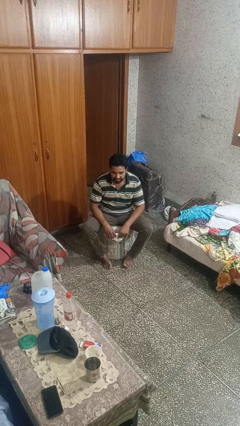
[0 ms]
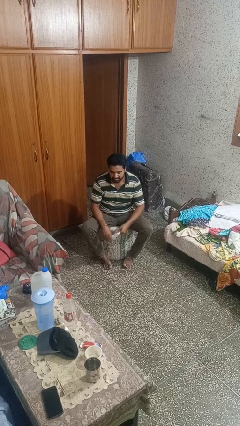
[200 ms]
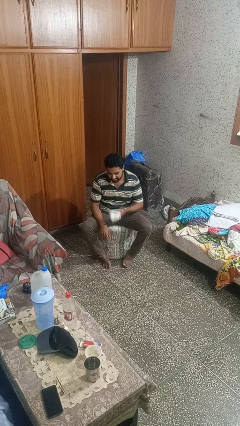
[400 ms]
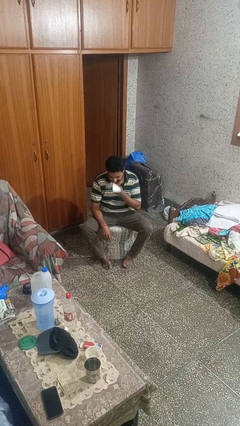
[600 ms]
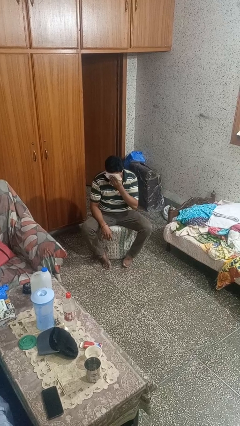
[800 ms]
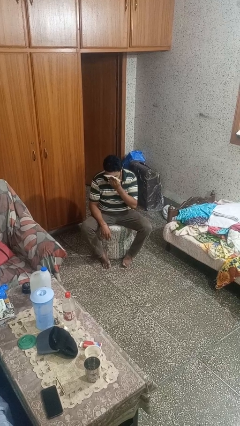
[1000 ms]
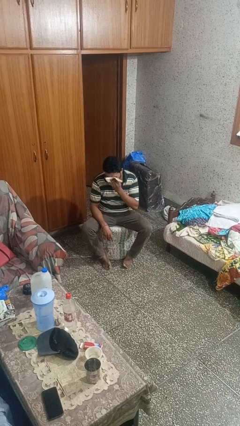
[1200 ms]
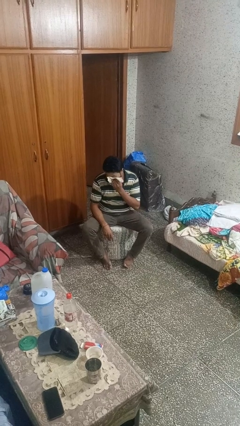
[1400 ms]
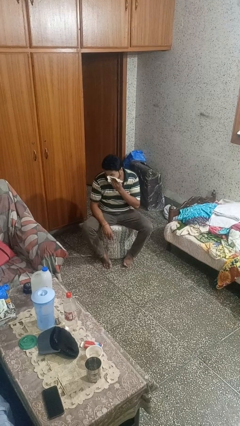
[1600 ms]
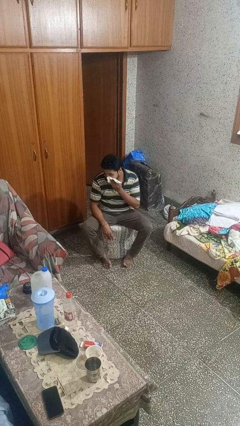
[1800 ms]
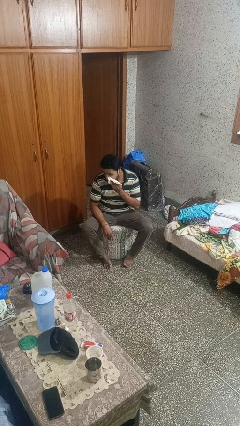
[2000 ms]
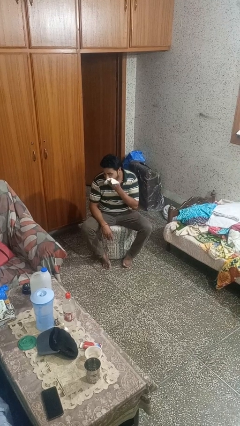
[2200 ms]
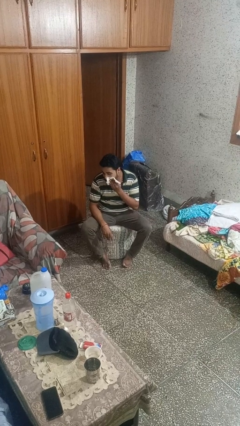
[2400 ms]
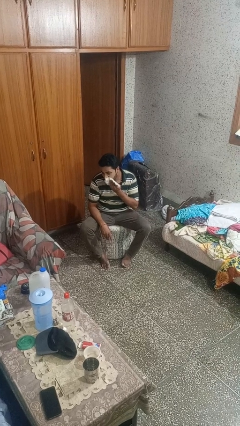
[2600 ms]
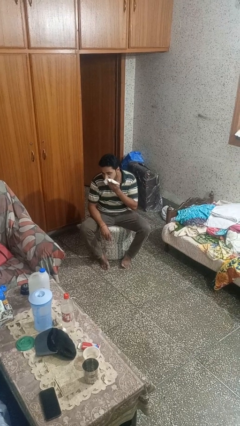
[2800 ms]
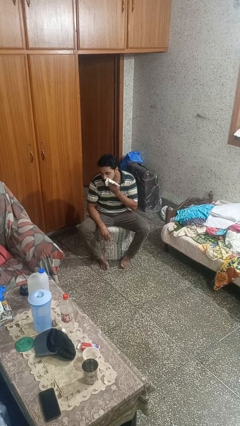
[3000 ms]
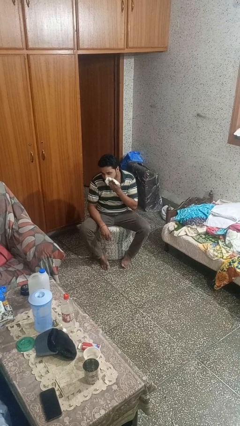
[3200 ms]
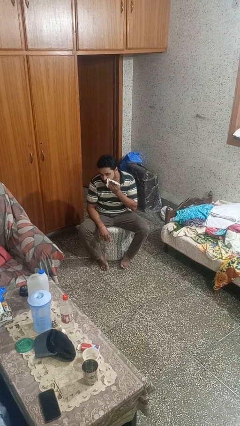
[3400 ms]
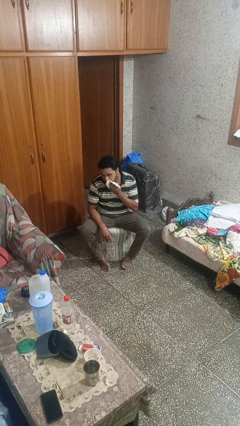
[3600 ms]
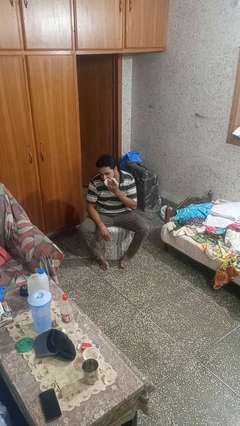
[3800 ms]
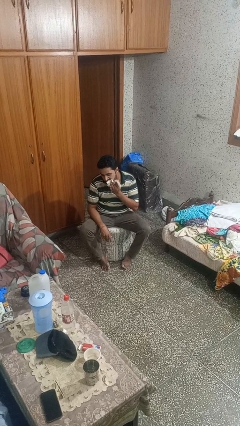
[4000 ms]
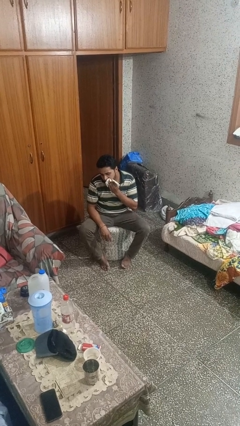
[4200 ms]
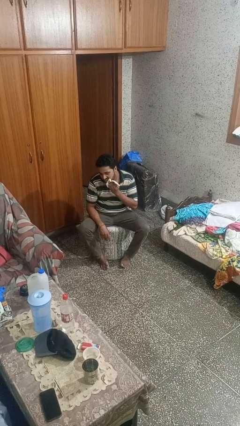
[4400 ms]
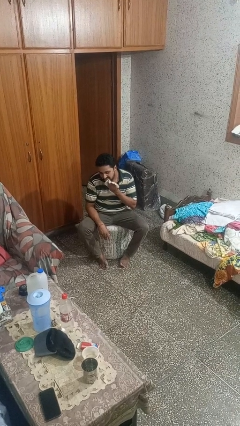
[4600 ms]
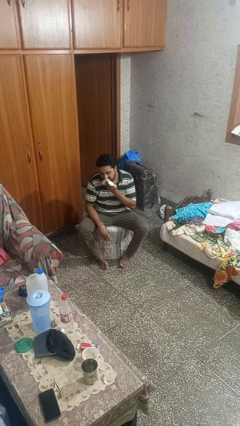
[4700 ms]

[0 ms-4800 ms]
person wipes mouth with napkin

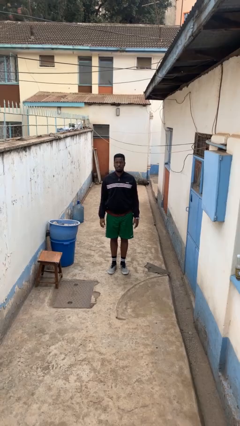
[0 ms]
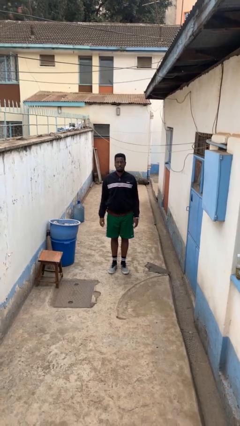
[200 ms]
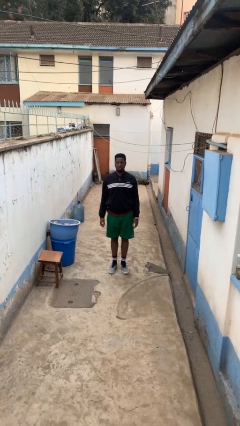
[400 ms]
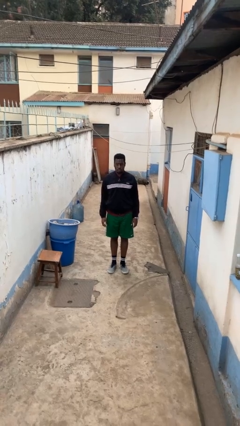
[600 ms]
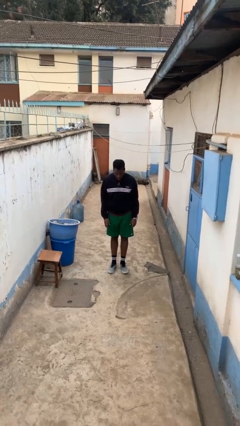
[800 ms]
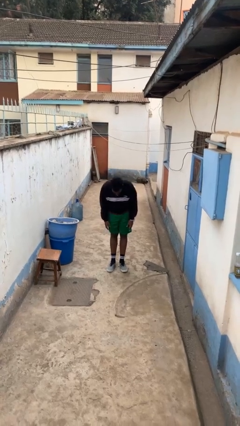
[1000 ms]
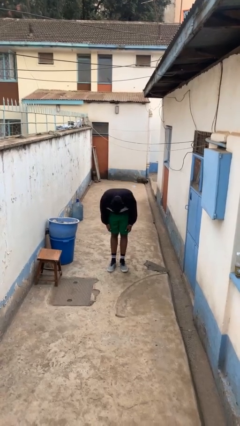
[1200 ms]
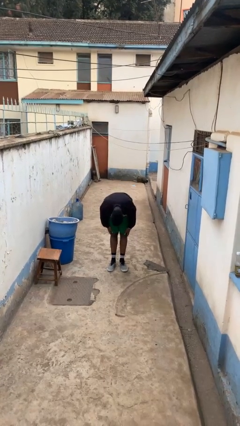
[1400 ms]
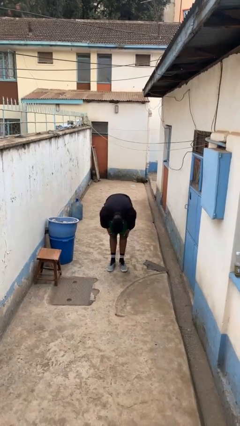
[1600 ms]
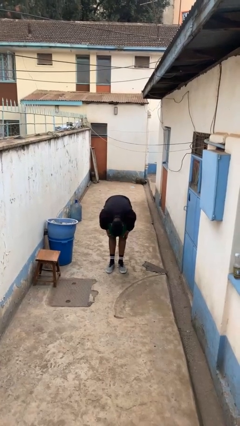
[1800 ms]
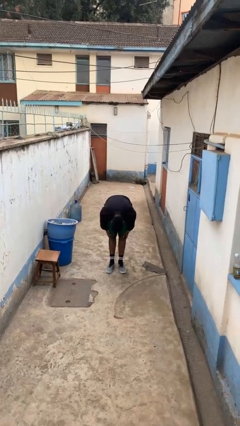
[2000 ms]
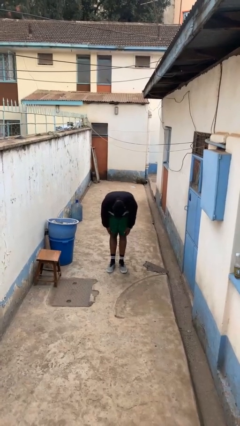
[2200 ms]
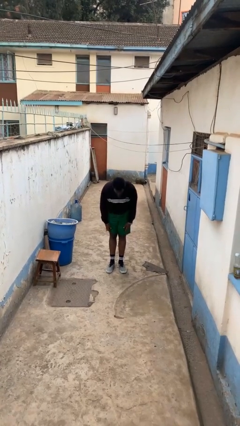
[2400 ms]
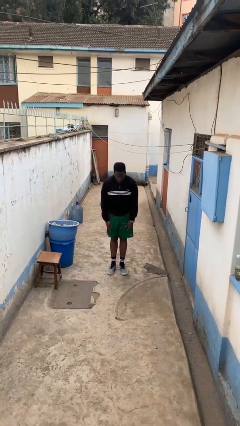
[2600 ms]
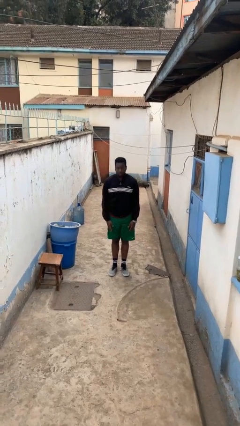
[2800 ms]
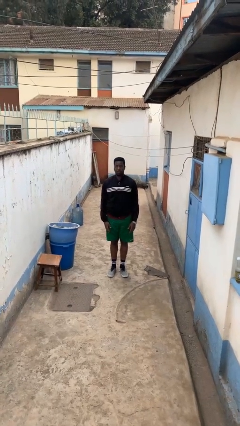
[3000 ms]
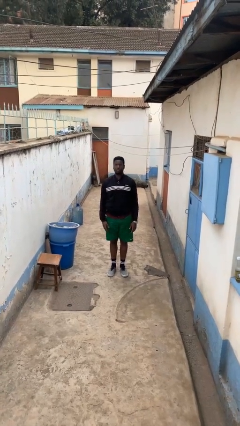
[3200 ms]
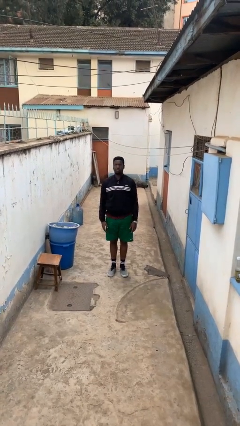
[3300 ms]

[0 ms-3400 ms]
person bows

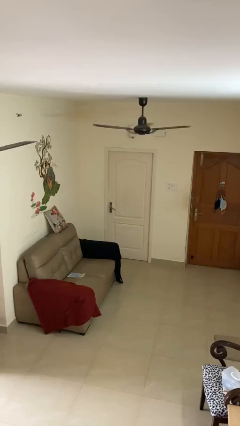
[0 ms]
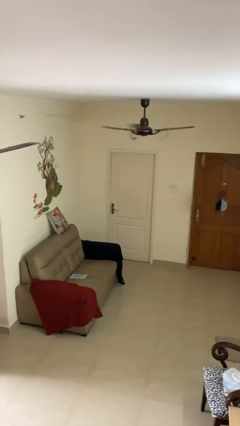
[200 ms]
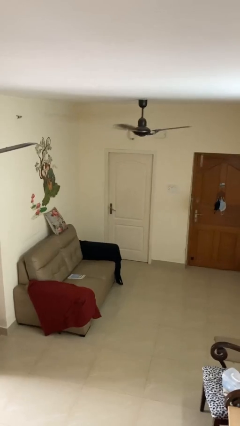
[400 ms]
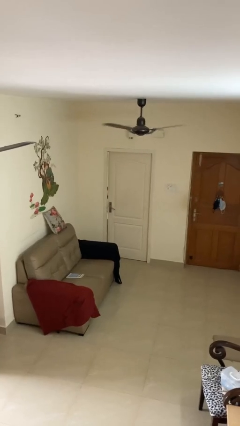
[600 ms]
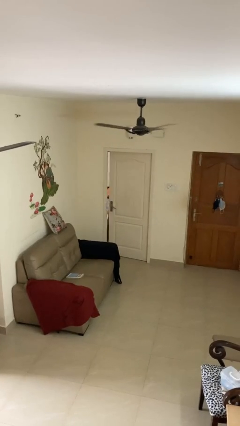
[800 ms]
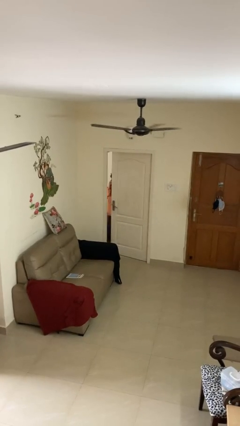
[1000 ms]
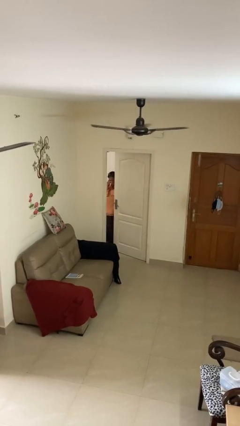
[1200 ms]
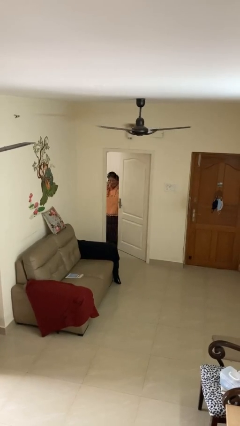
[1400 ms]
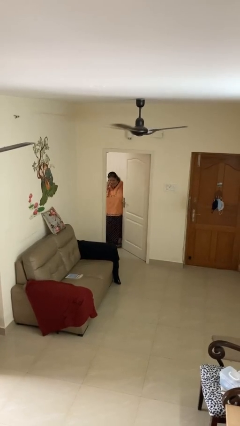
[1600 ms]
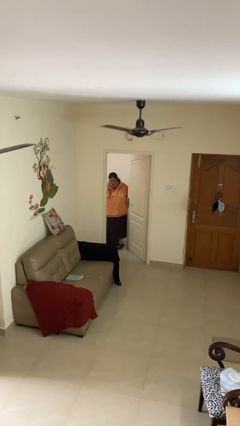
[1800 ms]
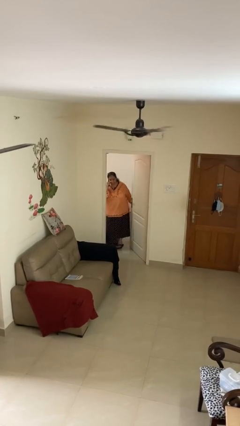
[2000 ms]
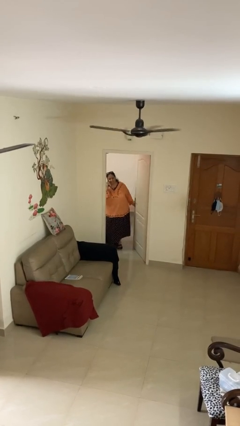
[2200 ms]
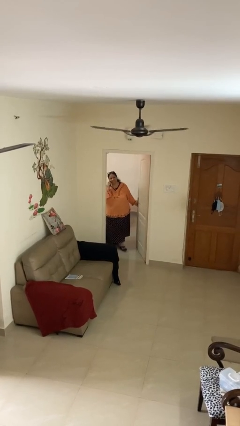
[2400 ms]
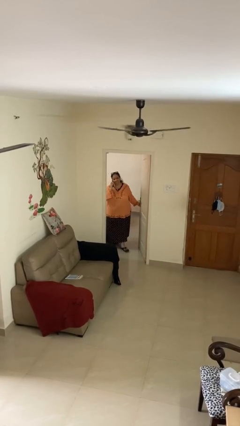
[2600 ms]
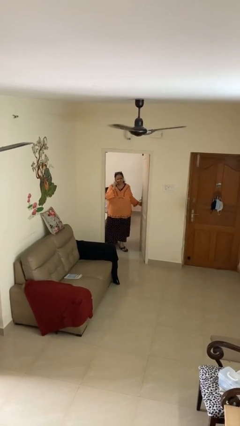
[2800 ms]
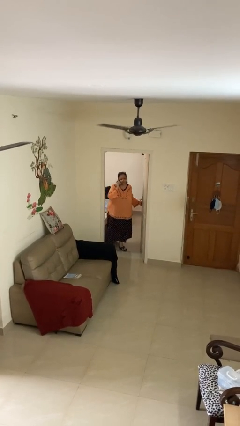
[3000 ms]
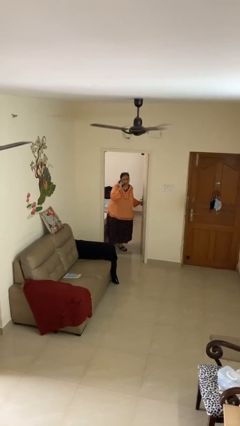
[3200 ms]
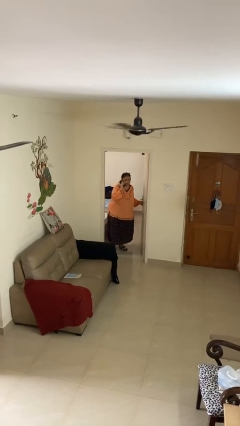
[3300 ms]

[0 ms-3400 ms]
person opens facility door

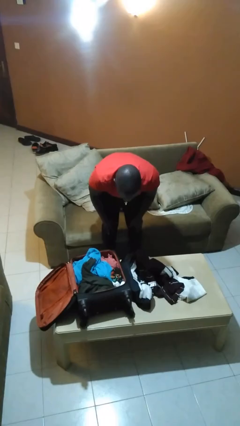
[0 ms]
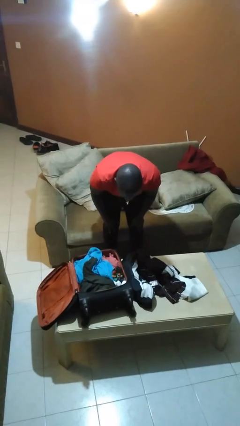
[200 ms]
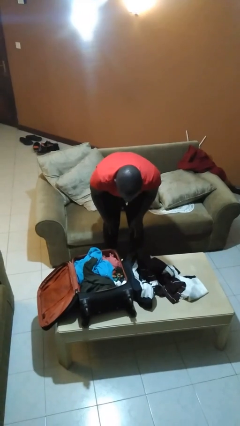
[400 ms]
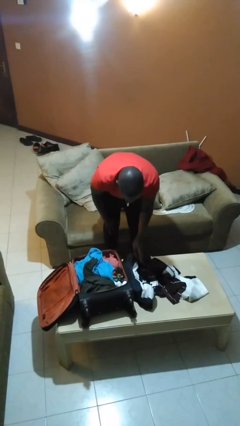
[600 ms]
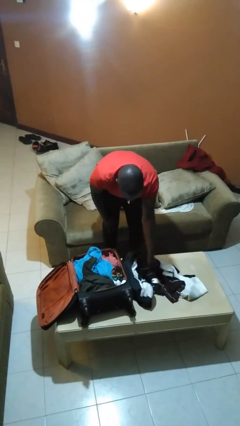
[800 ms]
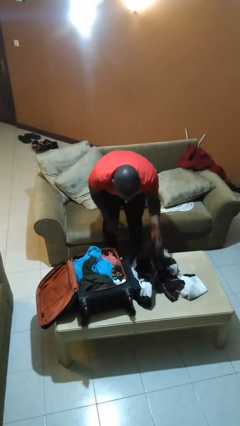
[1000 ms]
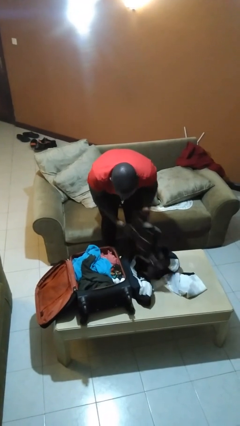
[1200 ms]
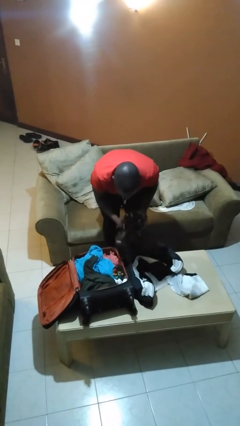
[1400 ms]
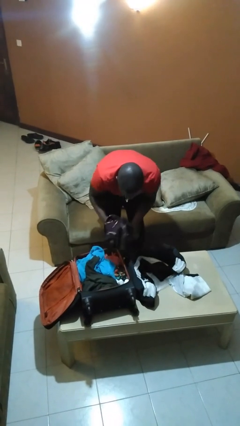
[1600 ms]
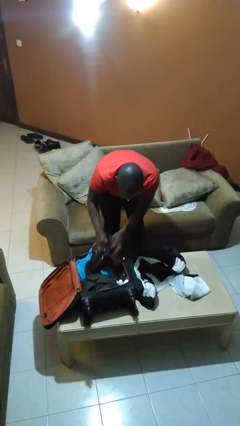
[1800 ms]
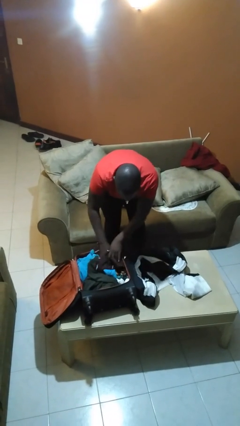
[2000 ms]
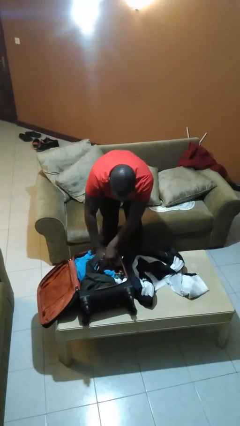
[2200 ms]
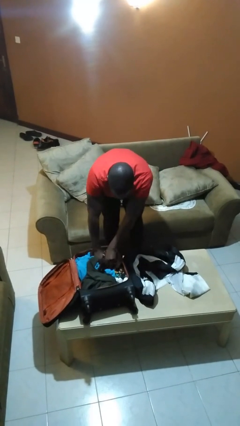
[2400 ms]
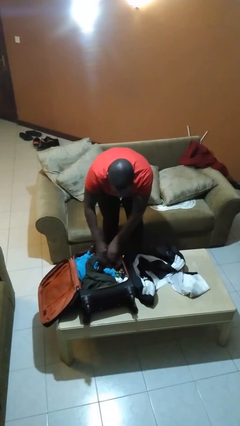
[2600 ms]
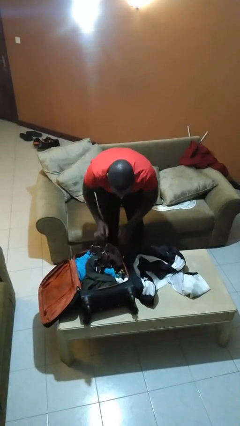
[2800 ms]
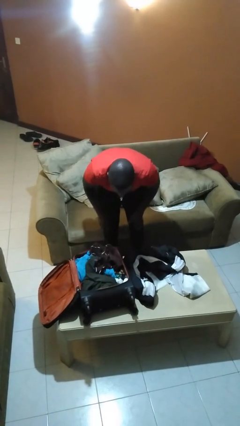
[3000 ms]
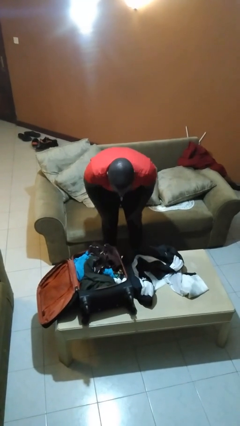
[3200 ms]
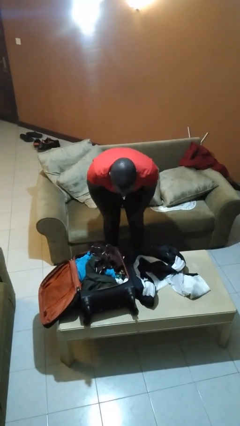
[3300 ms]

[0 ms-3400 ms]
person loads clothes into suitcase

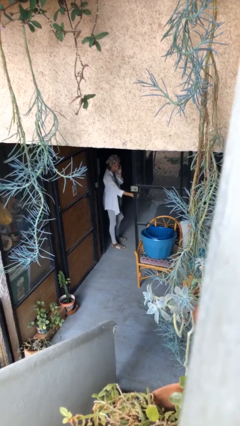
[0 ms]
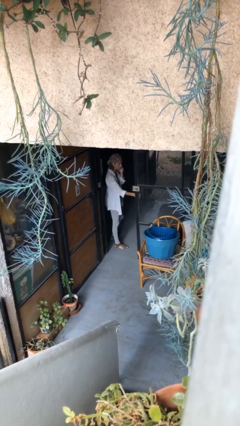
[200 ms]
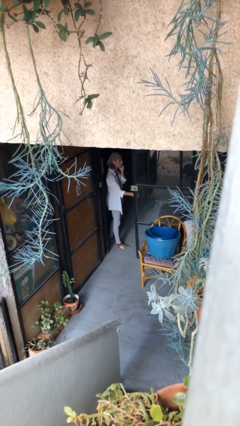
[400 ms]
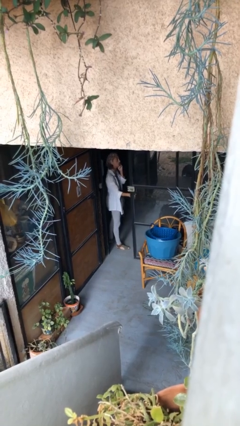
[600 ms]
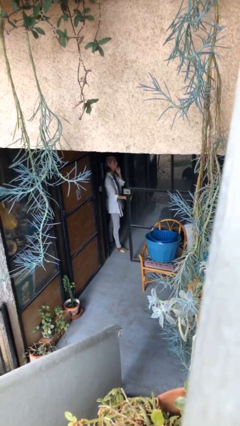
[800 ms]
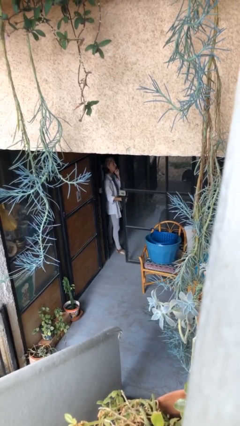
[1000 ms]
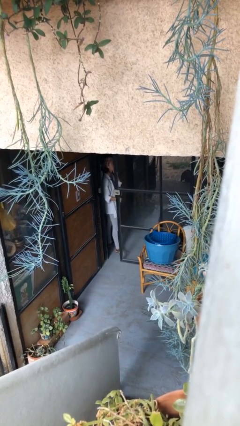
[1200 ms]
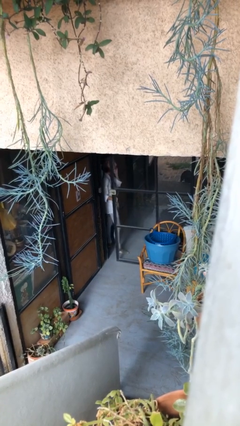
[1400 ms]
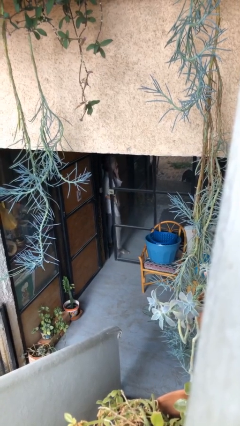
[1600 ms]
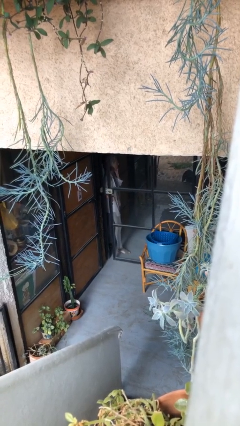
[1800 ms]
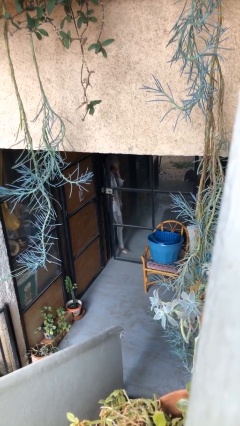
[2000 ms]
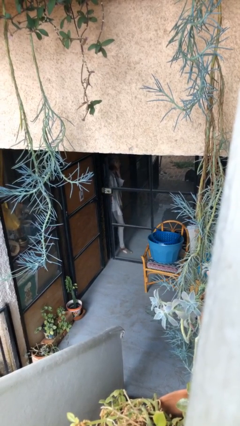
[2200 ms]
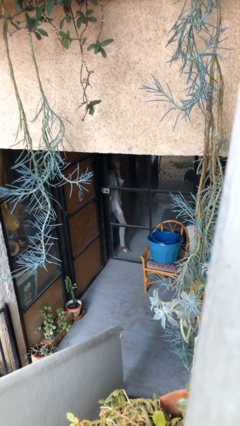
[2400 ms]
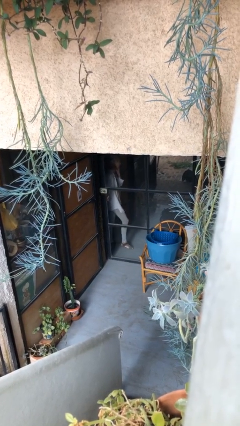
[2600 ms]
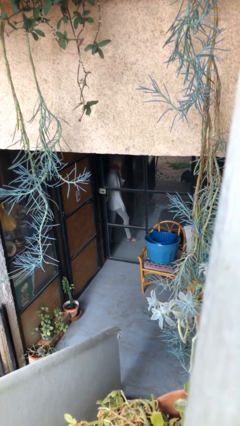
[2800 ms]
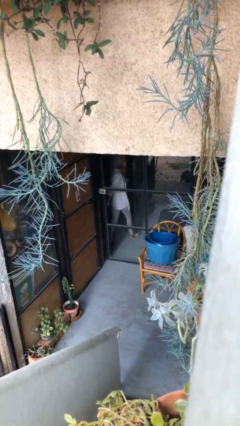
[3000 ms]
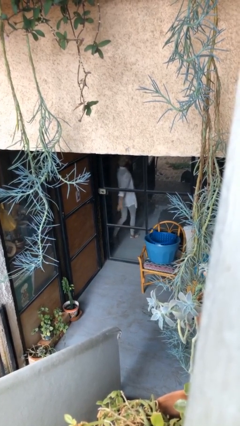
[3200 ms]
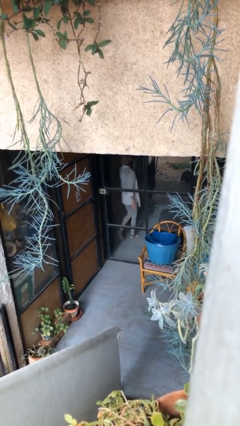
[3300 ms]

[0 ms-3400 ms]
person closes facility door
